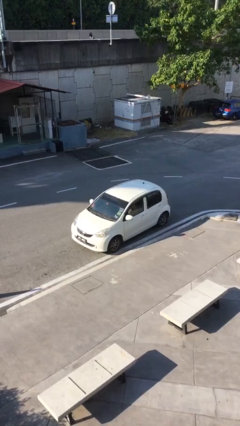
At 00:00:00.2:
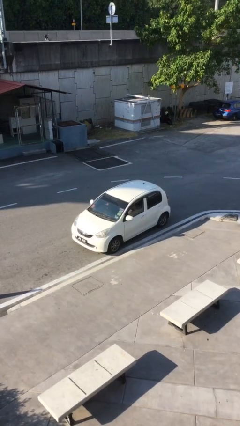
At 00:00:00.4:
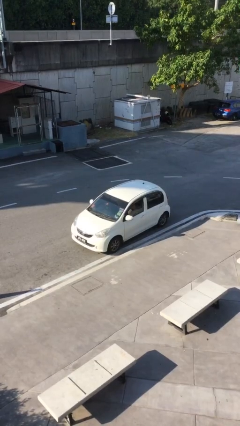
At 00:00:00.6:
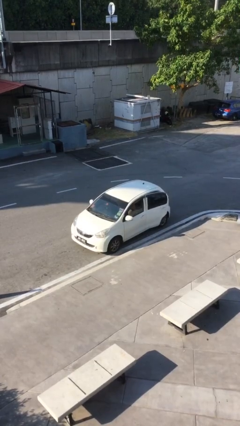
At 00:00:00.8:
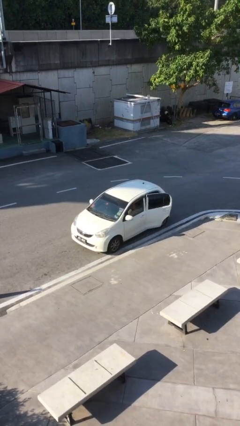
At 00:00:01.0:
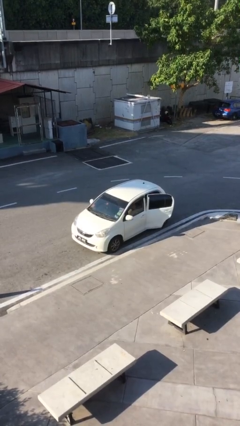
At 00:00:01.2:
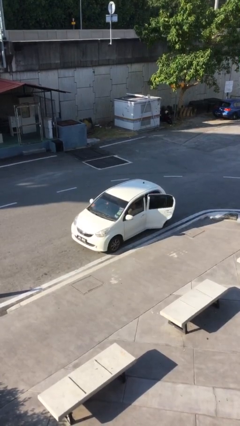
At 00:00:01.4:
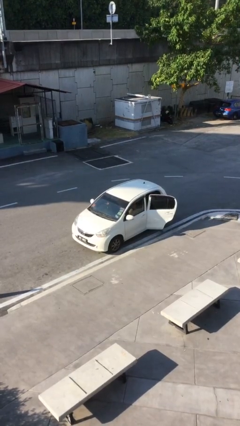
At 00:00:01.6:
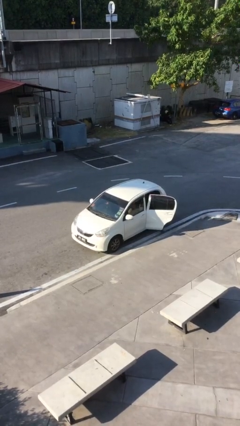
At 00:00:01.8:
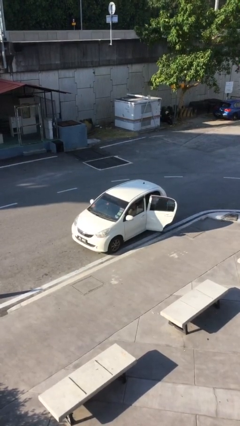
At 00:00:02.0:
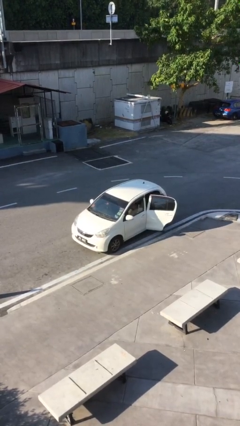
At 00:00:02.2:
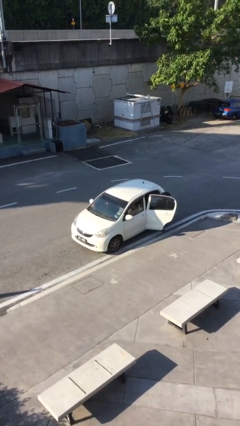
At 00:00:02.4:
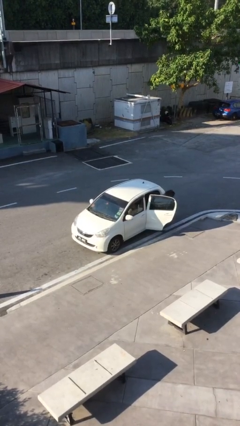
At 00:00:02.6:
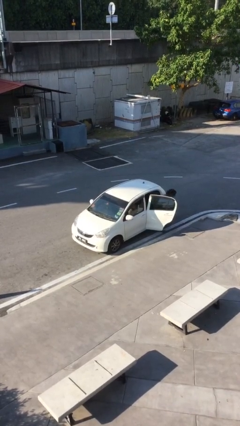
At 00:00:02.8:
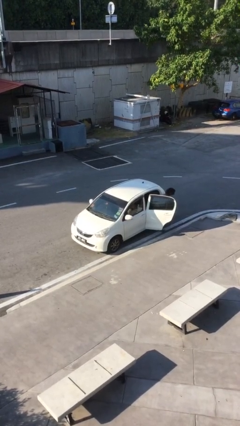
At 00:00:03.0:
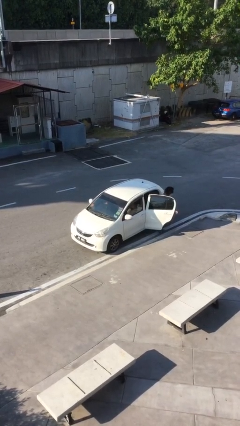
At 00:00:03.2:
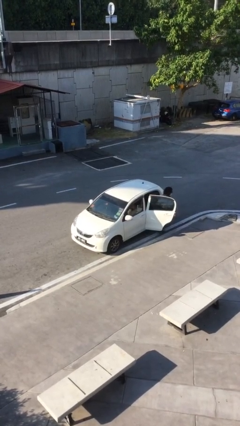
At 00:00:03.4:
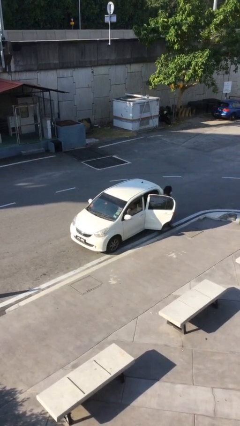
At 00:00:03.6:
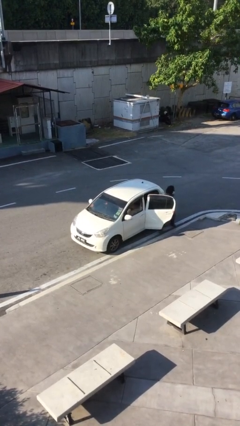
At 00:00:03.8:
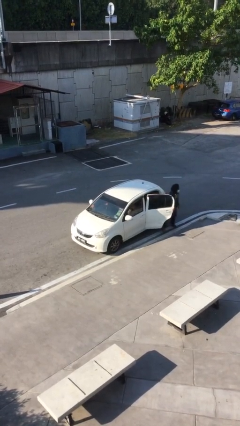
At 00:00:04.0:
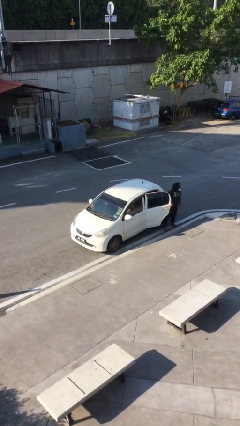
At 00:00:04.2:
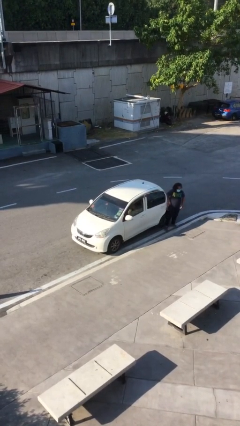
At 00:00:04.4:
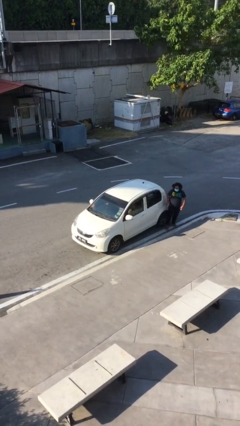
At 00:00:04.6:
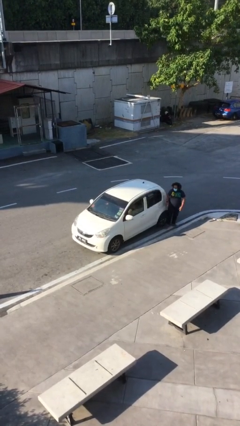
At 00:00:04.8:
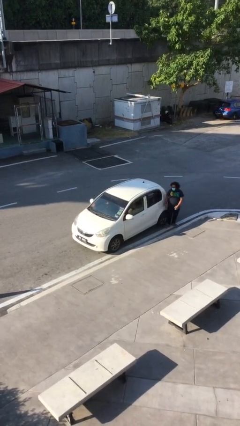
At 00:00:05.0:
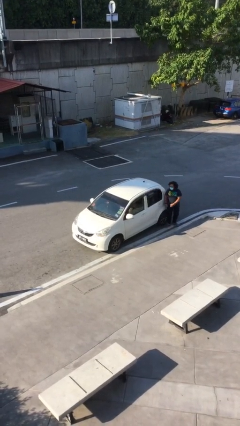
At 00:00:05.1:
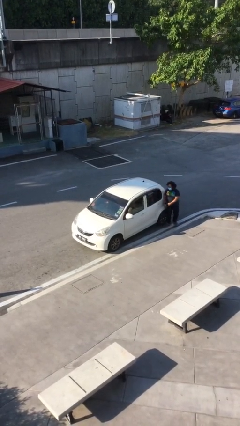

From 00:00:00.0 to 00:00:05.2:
car drops off person

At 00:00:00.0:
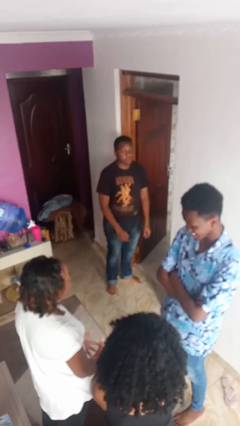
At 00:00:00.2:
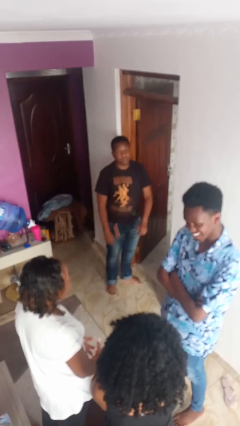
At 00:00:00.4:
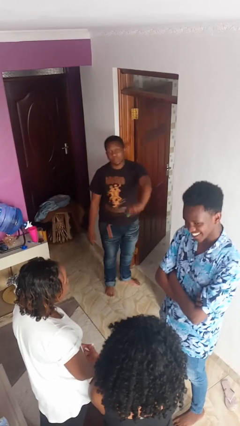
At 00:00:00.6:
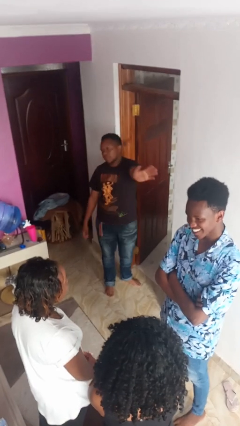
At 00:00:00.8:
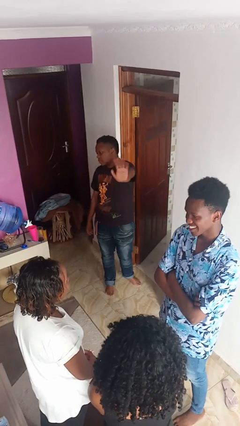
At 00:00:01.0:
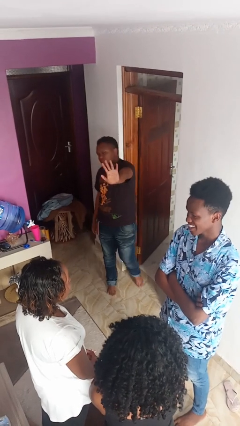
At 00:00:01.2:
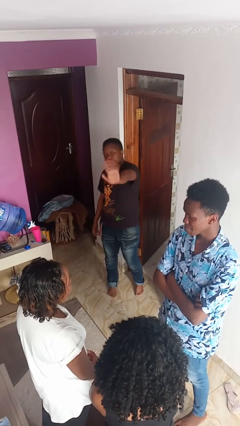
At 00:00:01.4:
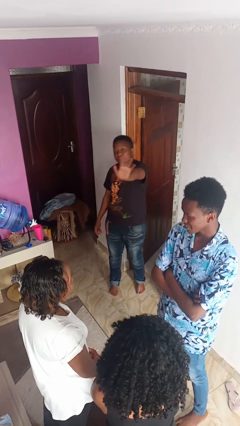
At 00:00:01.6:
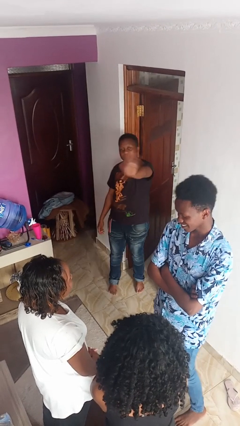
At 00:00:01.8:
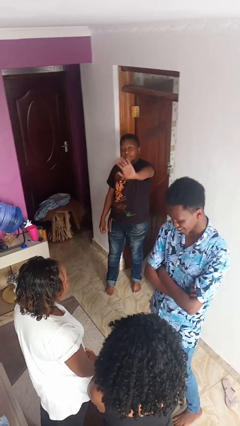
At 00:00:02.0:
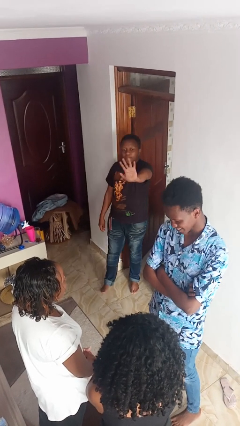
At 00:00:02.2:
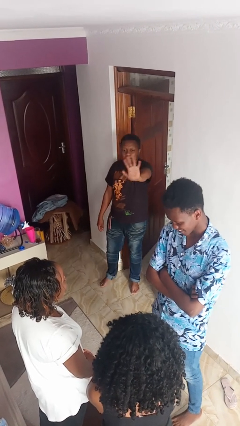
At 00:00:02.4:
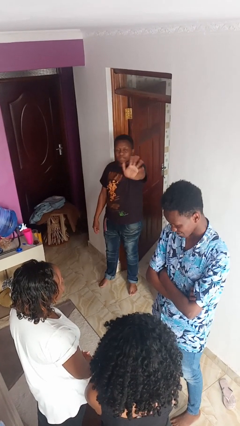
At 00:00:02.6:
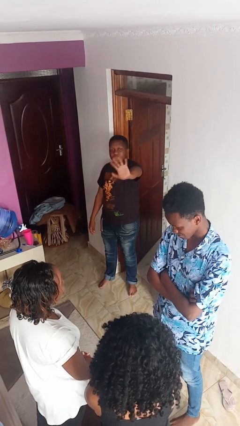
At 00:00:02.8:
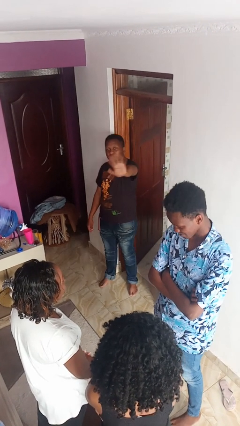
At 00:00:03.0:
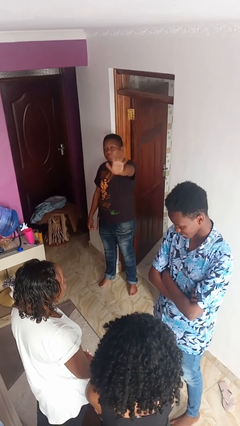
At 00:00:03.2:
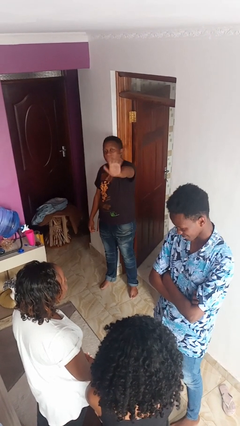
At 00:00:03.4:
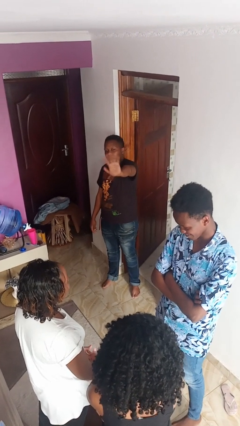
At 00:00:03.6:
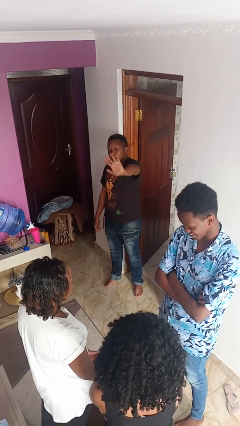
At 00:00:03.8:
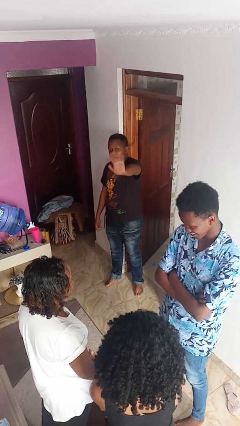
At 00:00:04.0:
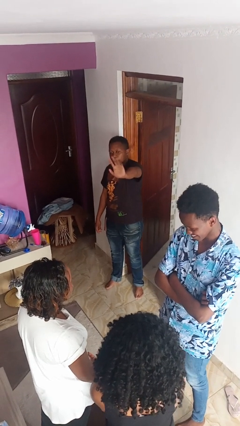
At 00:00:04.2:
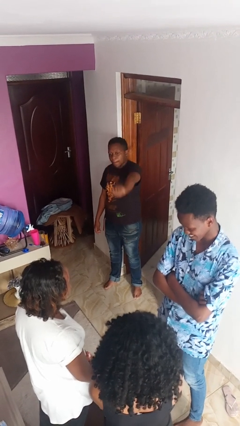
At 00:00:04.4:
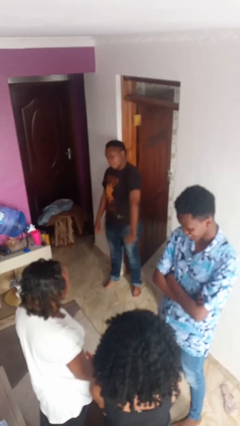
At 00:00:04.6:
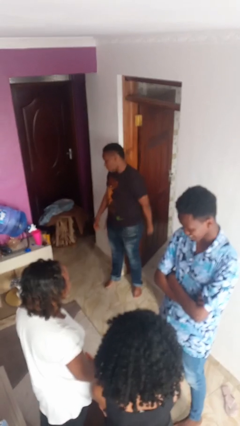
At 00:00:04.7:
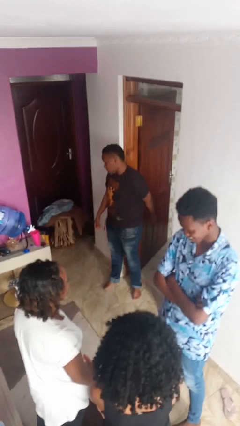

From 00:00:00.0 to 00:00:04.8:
person waves at person

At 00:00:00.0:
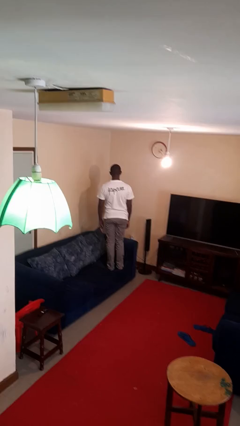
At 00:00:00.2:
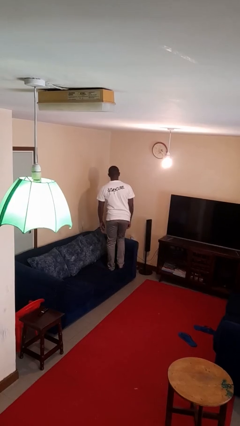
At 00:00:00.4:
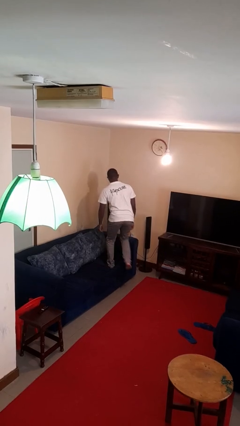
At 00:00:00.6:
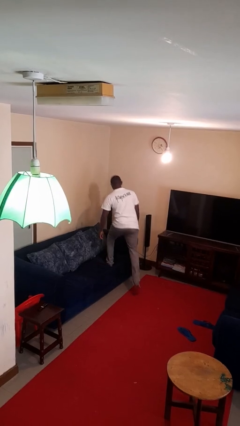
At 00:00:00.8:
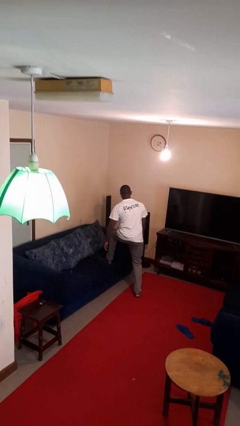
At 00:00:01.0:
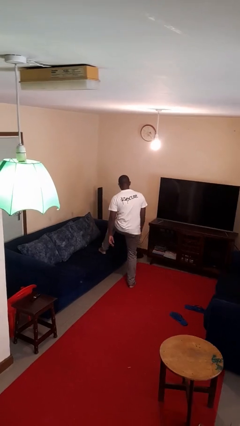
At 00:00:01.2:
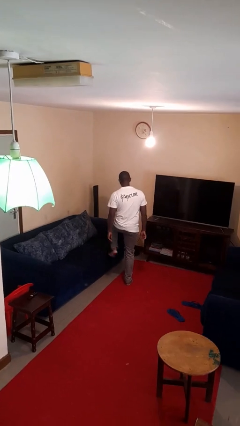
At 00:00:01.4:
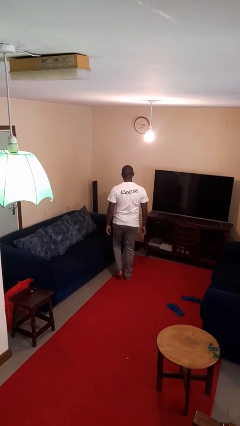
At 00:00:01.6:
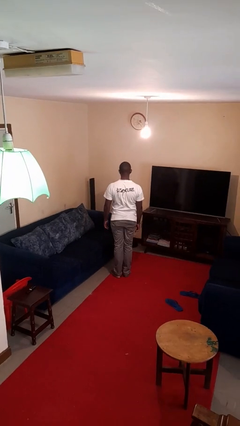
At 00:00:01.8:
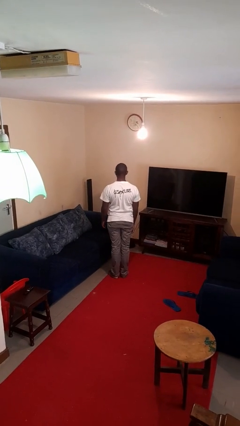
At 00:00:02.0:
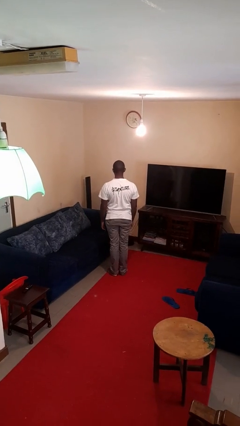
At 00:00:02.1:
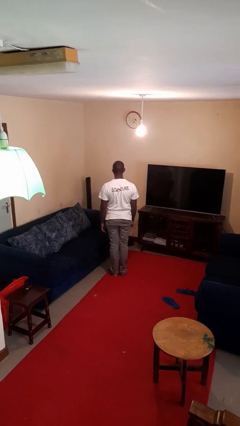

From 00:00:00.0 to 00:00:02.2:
person climbs off couch

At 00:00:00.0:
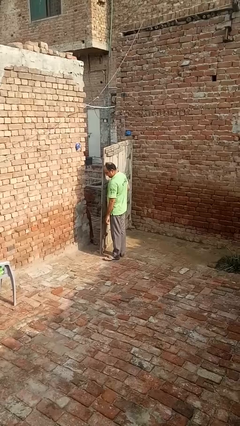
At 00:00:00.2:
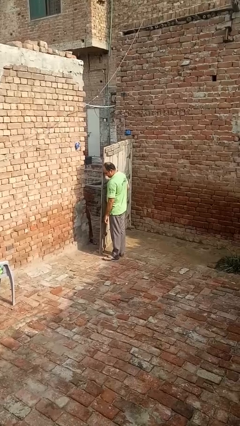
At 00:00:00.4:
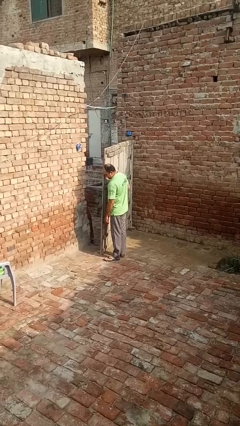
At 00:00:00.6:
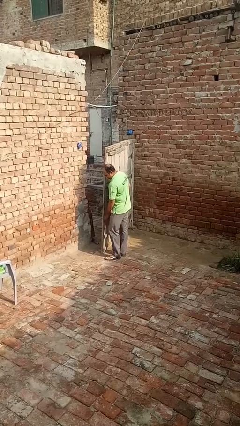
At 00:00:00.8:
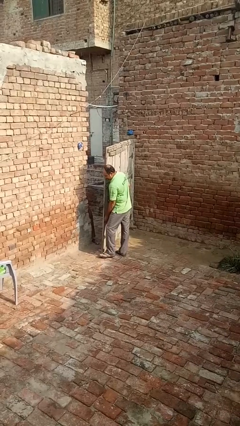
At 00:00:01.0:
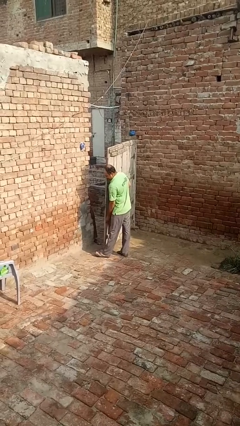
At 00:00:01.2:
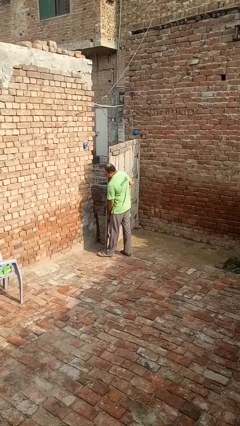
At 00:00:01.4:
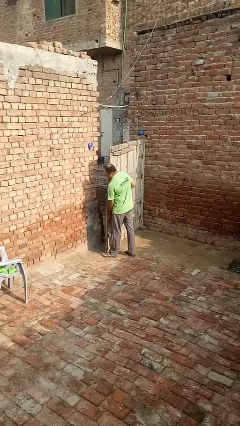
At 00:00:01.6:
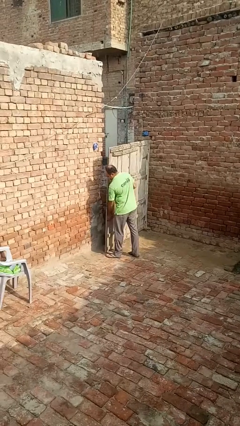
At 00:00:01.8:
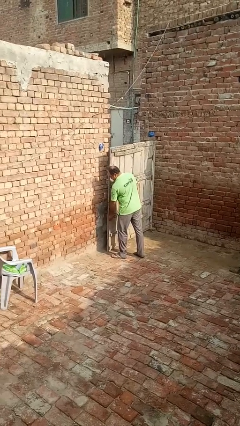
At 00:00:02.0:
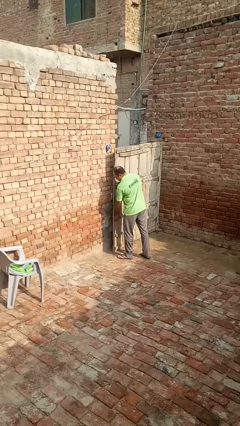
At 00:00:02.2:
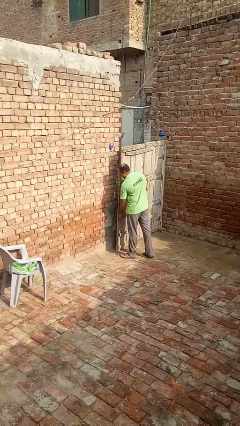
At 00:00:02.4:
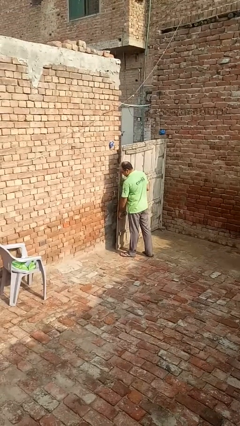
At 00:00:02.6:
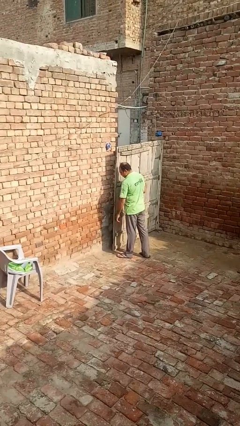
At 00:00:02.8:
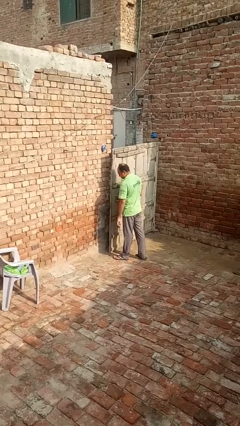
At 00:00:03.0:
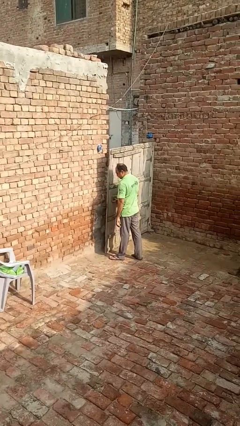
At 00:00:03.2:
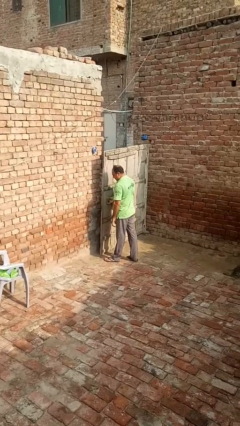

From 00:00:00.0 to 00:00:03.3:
person closes gate

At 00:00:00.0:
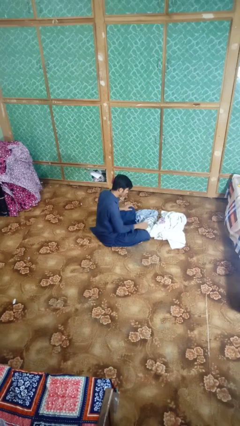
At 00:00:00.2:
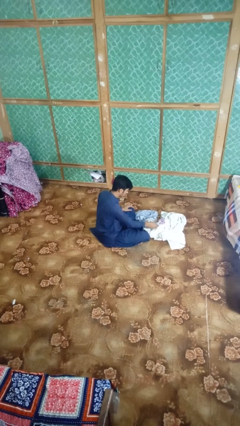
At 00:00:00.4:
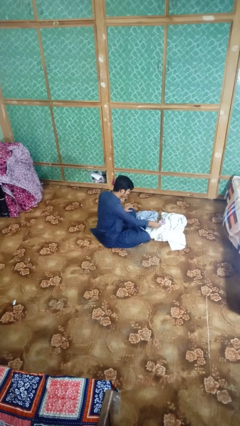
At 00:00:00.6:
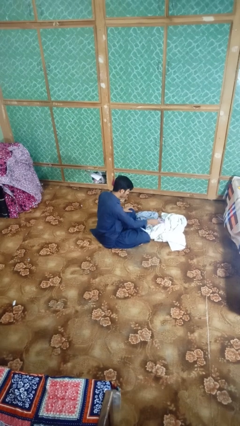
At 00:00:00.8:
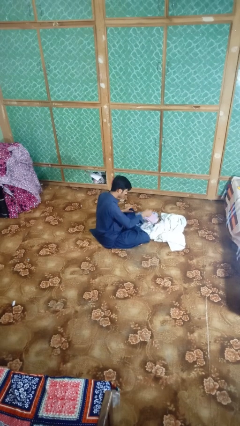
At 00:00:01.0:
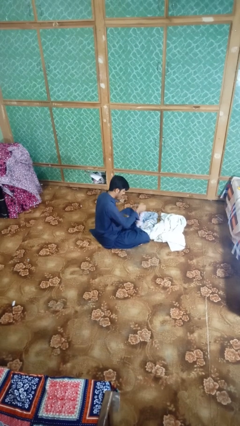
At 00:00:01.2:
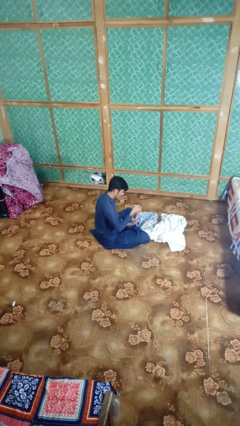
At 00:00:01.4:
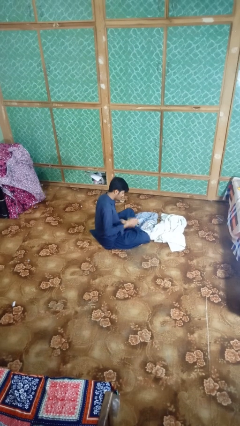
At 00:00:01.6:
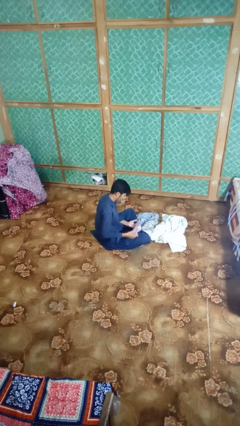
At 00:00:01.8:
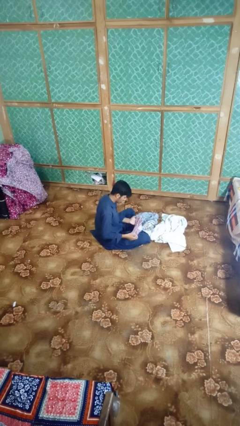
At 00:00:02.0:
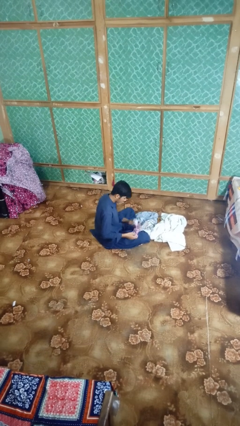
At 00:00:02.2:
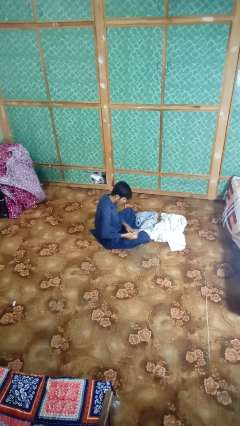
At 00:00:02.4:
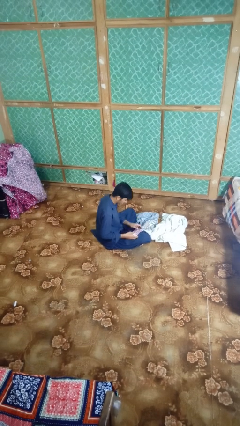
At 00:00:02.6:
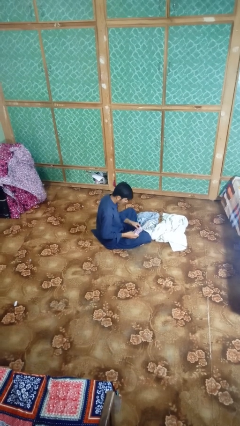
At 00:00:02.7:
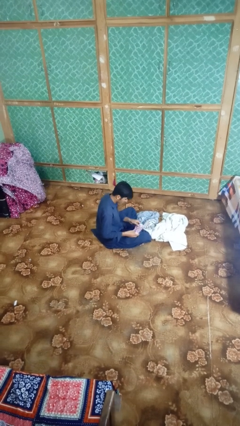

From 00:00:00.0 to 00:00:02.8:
person folds socks
